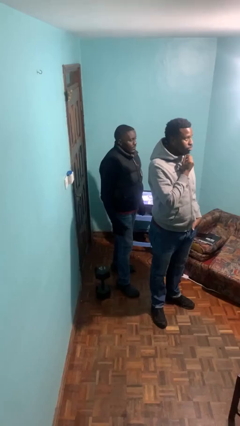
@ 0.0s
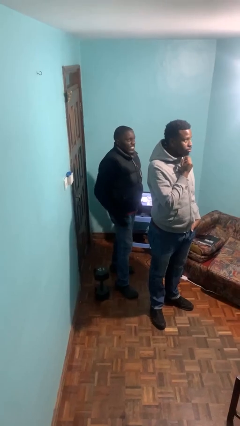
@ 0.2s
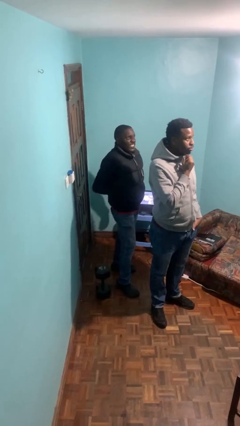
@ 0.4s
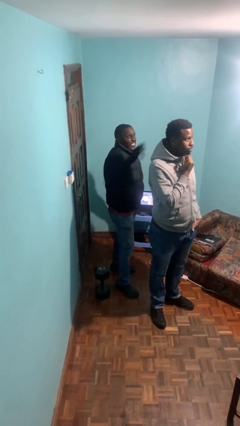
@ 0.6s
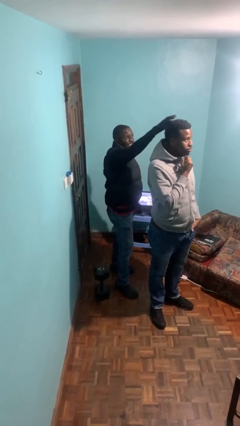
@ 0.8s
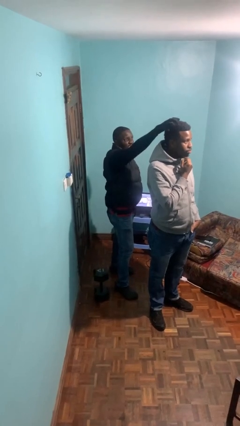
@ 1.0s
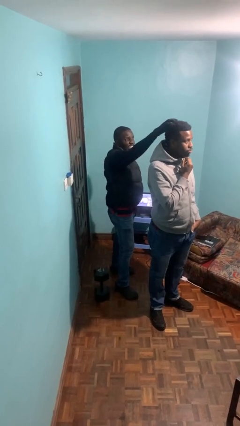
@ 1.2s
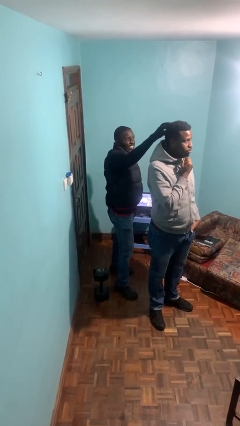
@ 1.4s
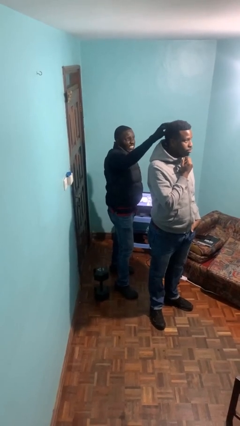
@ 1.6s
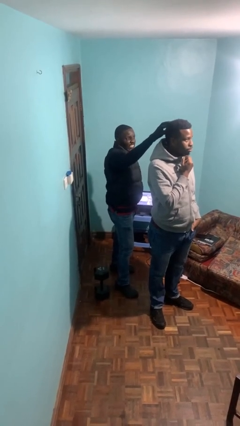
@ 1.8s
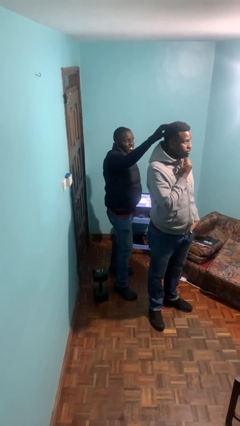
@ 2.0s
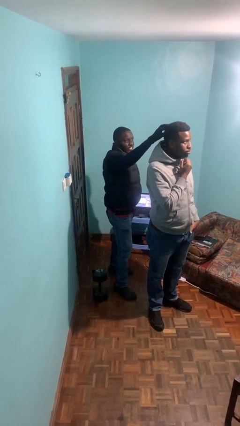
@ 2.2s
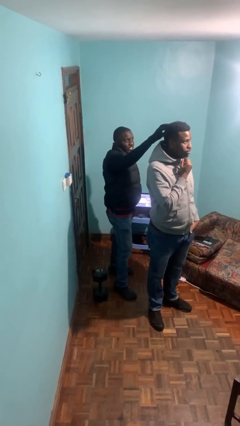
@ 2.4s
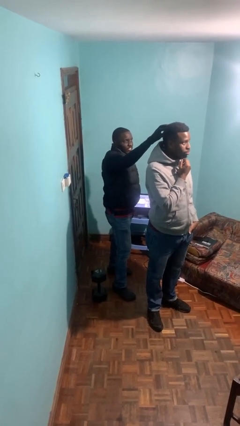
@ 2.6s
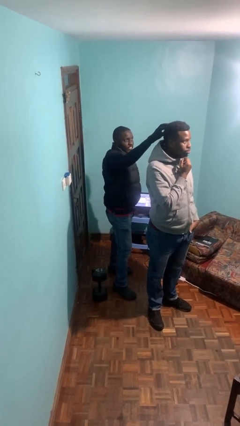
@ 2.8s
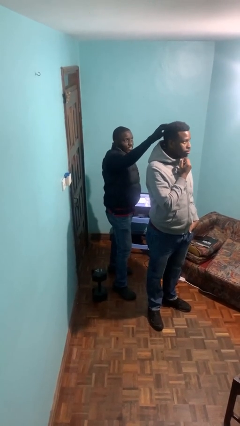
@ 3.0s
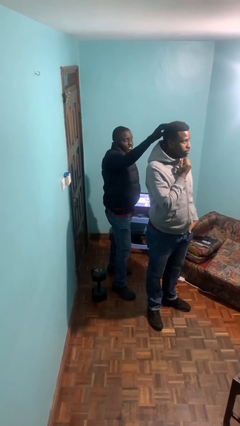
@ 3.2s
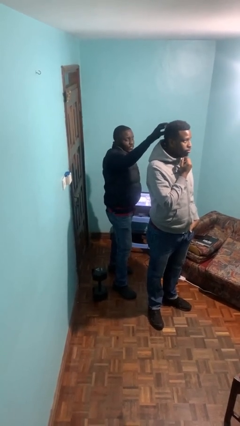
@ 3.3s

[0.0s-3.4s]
person grabs person by hair

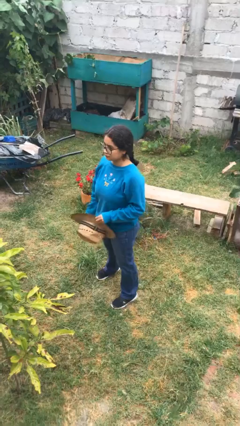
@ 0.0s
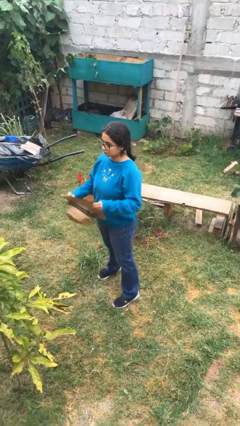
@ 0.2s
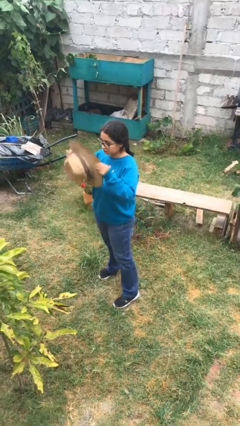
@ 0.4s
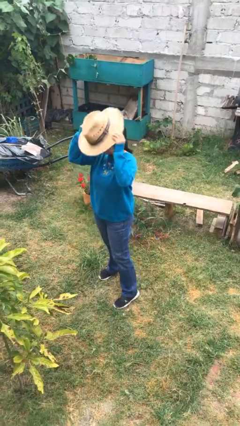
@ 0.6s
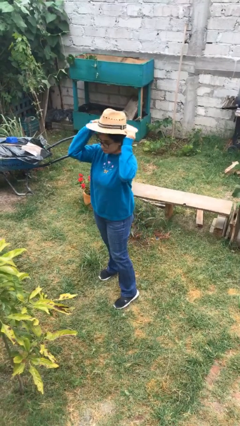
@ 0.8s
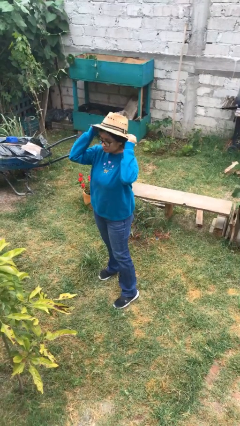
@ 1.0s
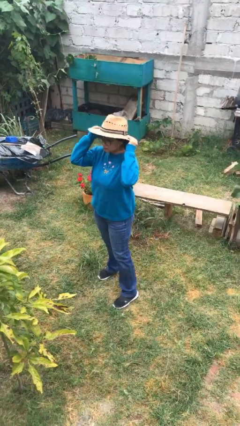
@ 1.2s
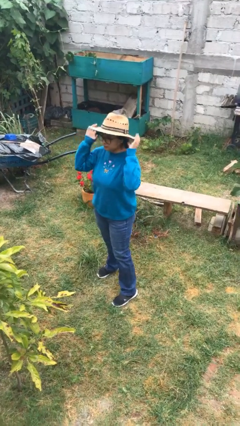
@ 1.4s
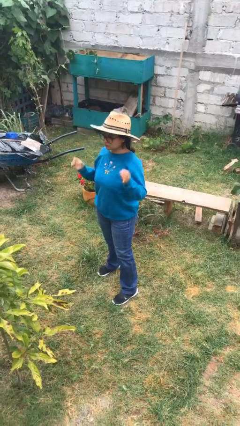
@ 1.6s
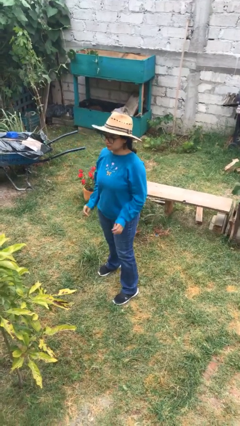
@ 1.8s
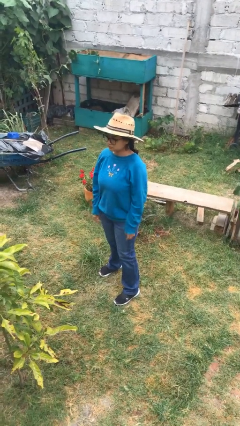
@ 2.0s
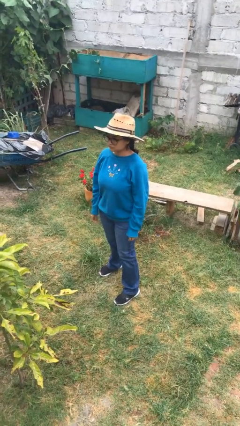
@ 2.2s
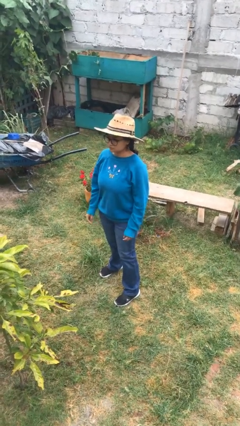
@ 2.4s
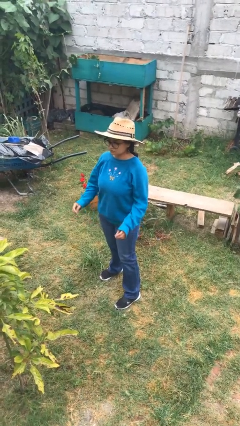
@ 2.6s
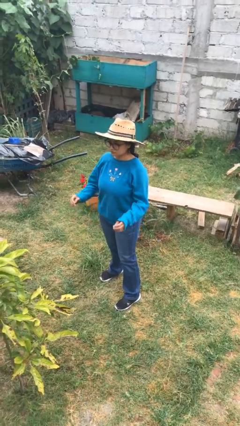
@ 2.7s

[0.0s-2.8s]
person puts on hat

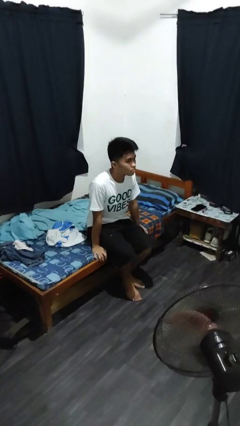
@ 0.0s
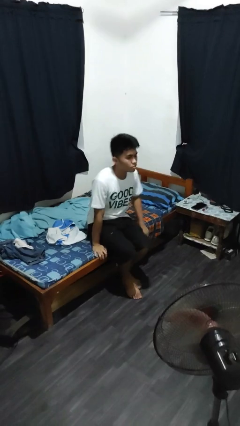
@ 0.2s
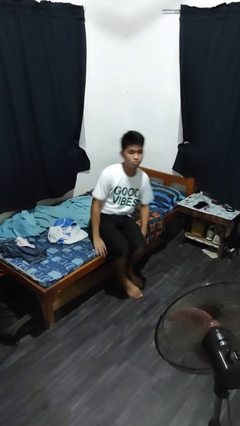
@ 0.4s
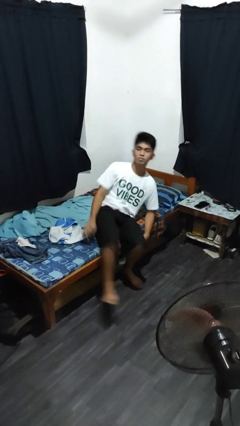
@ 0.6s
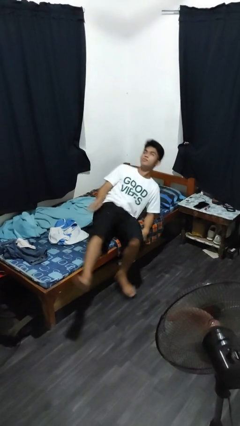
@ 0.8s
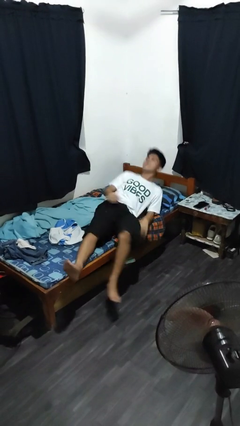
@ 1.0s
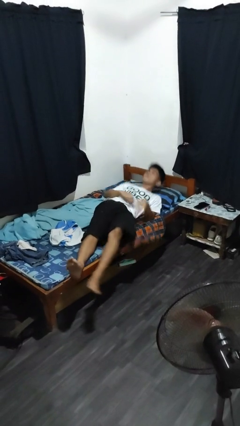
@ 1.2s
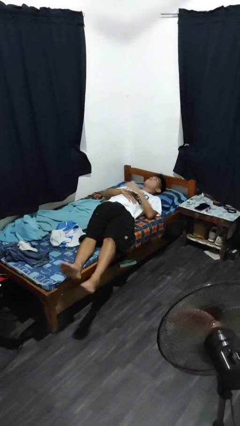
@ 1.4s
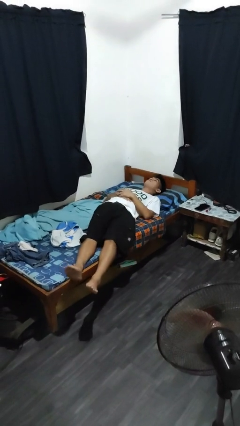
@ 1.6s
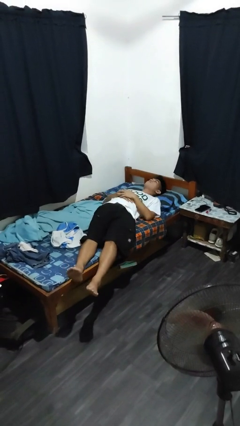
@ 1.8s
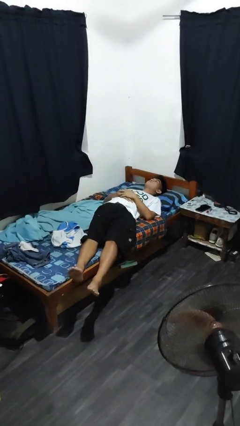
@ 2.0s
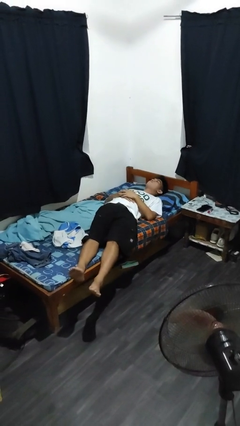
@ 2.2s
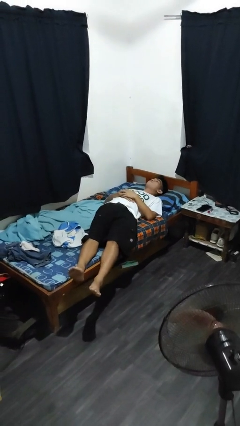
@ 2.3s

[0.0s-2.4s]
person lies down on bed

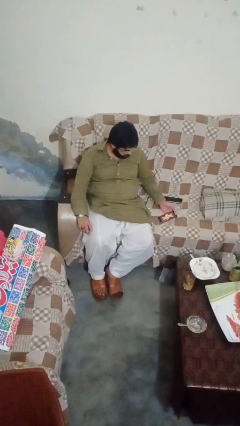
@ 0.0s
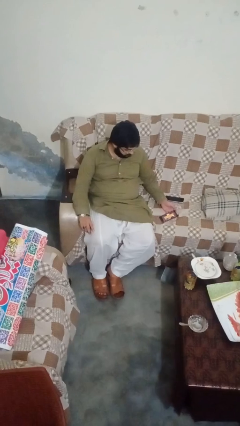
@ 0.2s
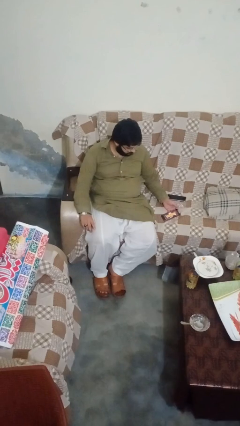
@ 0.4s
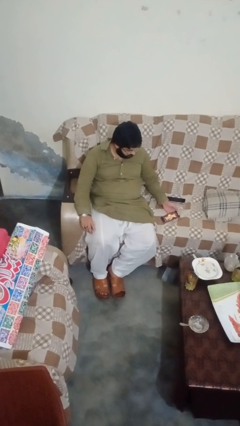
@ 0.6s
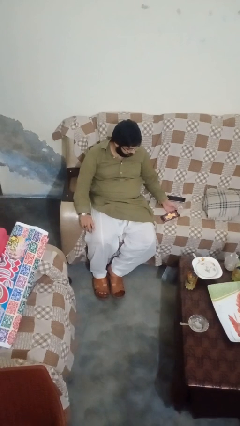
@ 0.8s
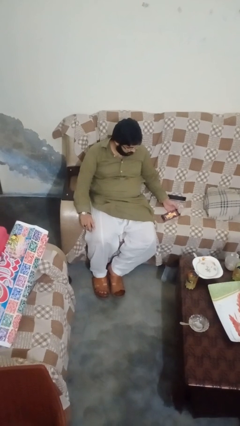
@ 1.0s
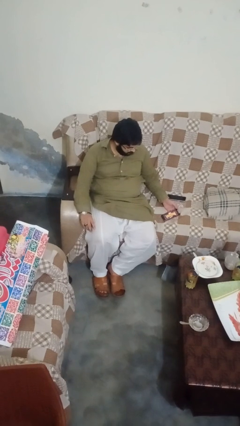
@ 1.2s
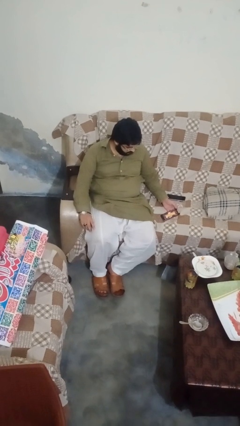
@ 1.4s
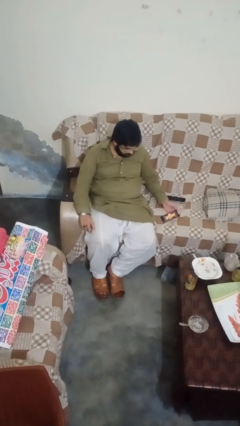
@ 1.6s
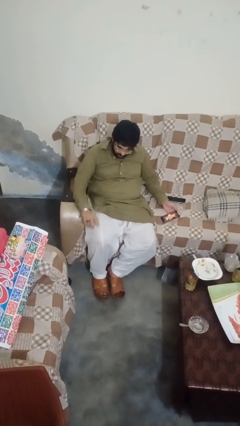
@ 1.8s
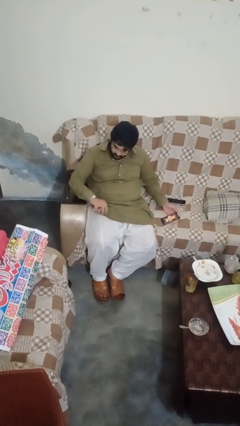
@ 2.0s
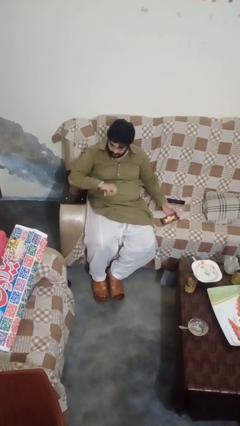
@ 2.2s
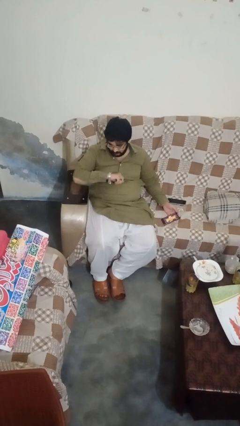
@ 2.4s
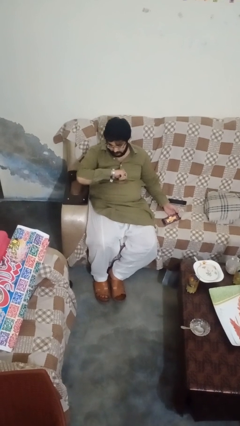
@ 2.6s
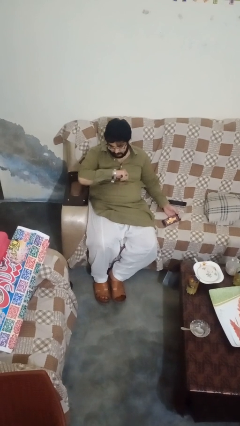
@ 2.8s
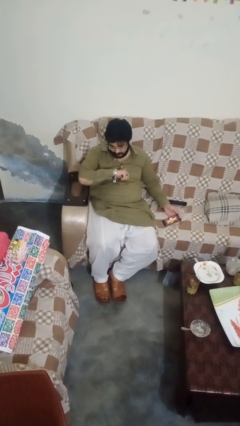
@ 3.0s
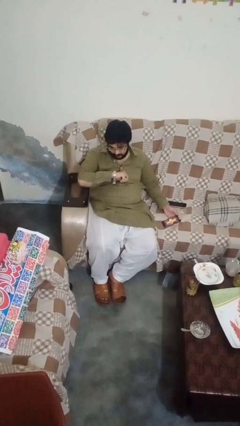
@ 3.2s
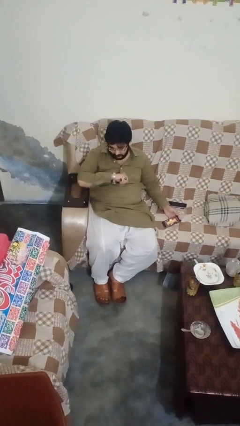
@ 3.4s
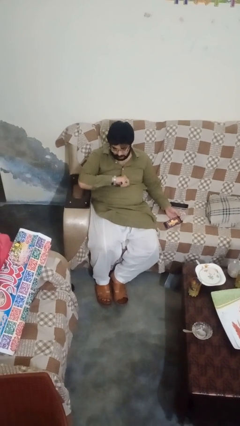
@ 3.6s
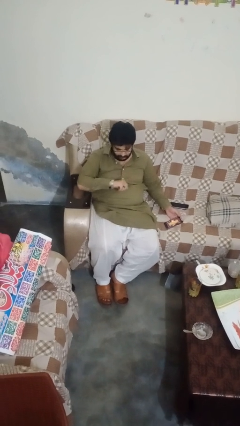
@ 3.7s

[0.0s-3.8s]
person looks at wristwatch

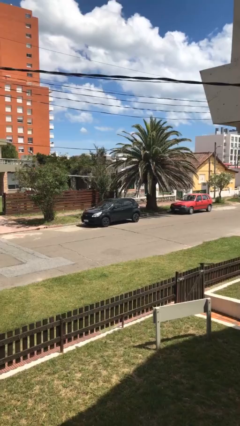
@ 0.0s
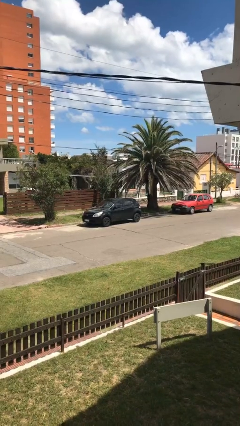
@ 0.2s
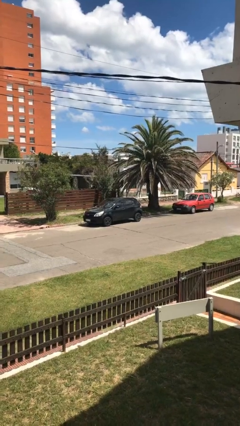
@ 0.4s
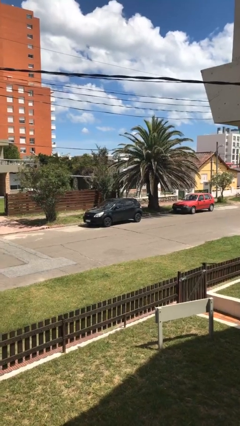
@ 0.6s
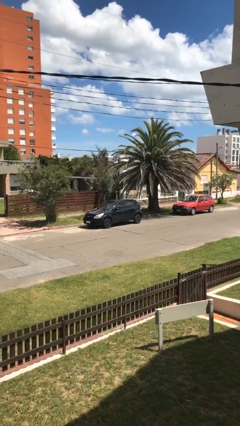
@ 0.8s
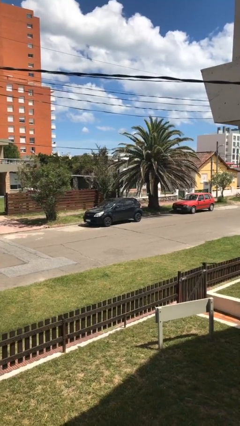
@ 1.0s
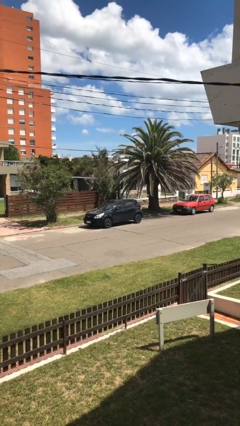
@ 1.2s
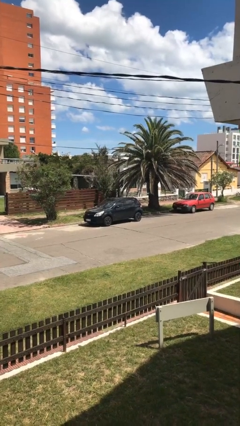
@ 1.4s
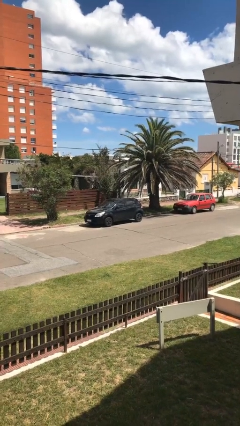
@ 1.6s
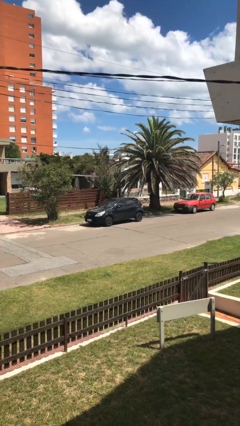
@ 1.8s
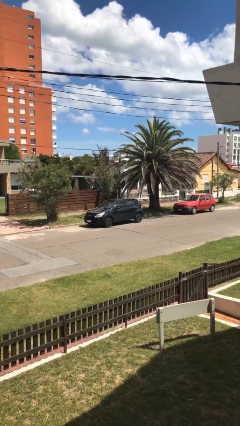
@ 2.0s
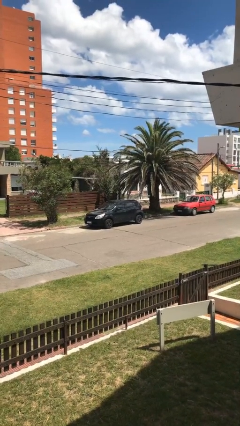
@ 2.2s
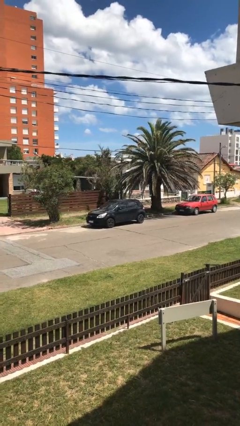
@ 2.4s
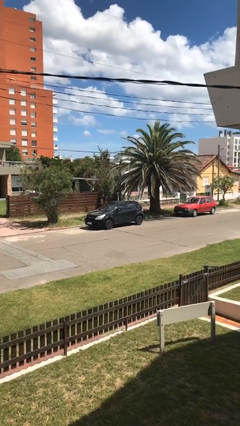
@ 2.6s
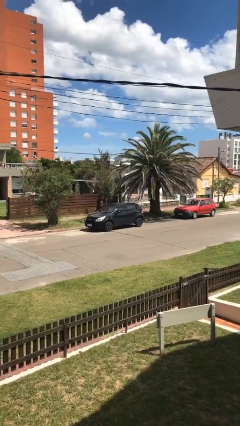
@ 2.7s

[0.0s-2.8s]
car drops off person

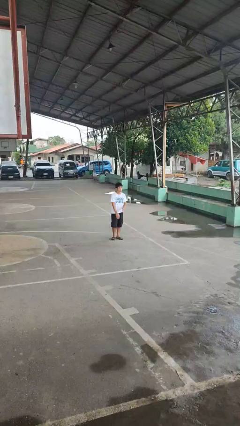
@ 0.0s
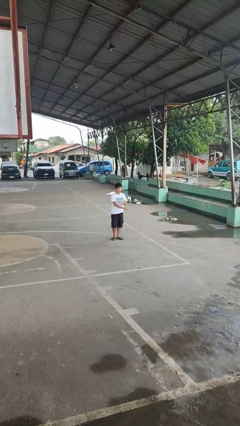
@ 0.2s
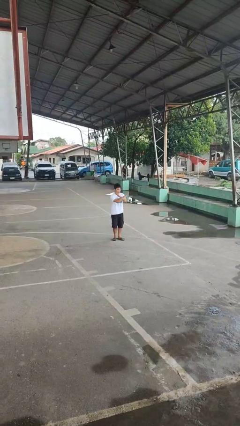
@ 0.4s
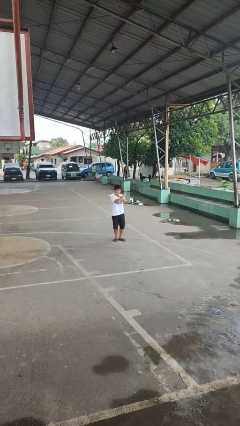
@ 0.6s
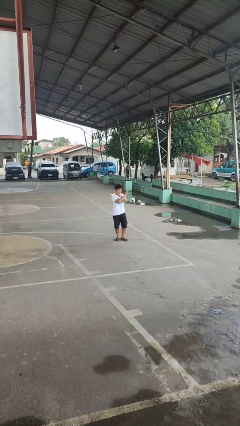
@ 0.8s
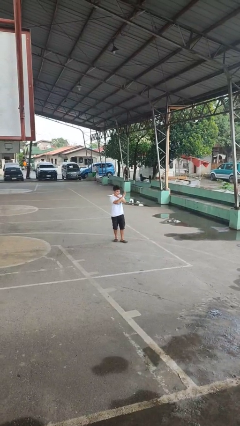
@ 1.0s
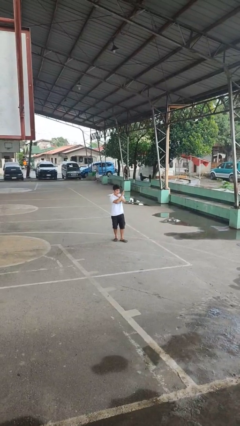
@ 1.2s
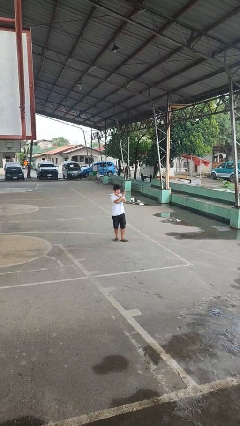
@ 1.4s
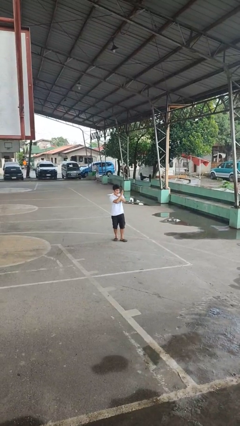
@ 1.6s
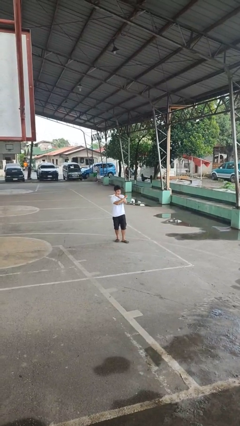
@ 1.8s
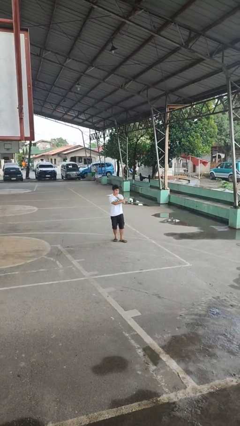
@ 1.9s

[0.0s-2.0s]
person gestures arms x
